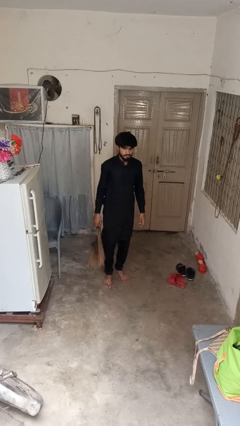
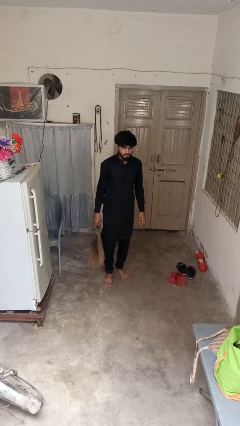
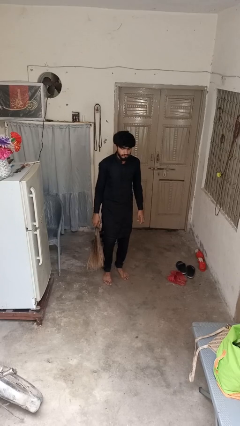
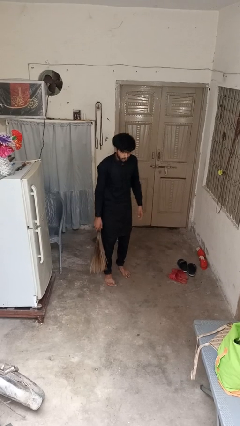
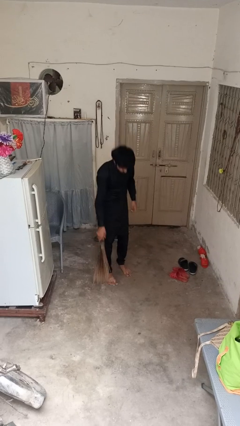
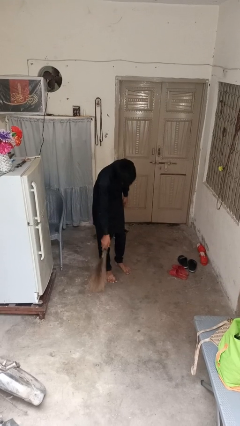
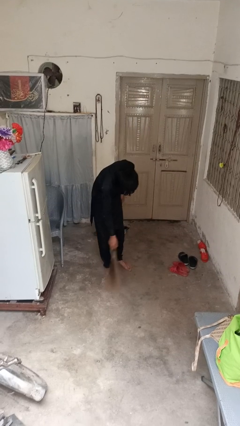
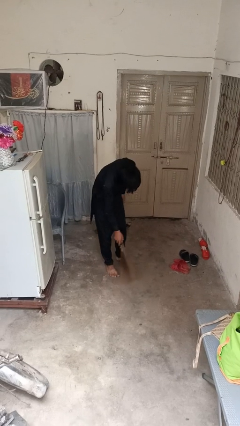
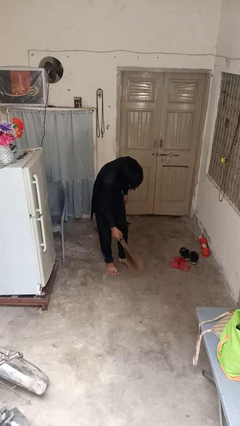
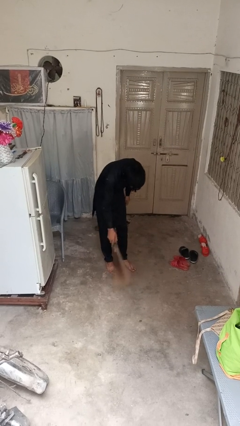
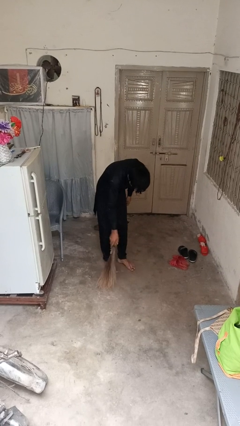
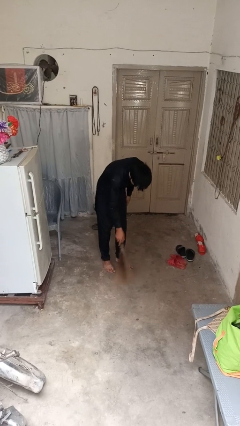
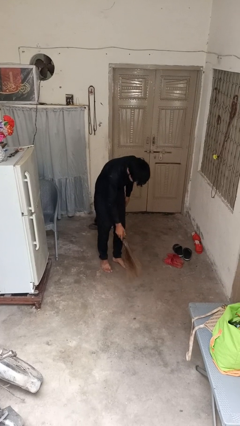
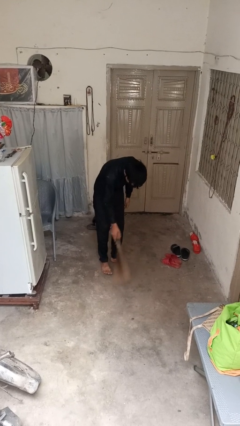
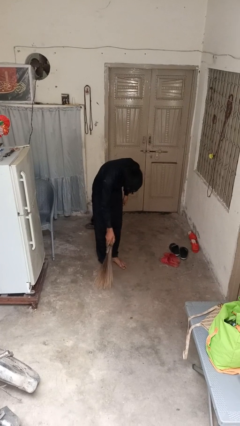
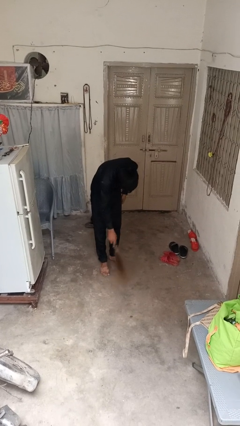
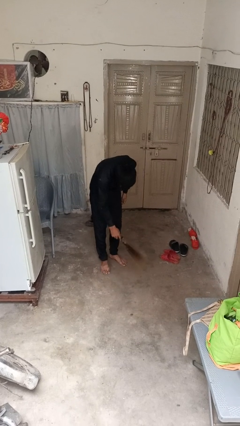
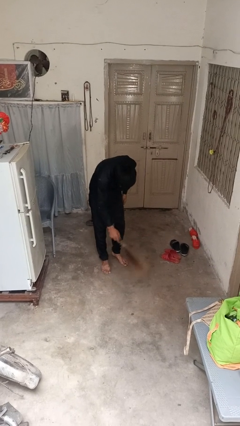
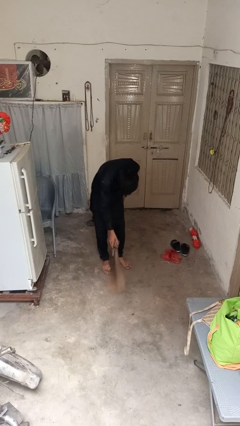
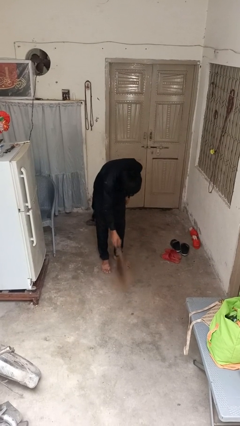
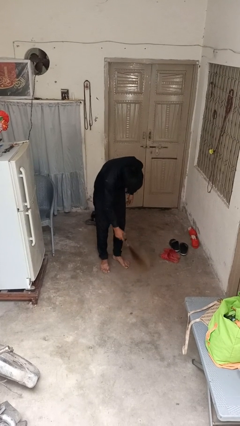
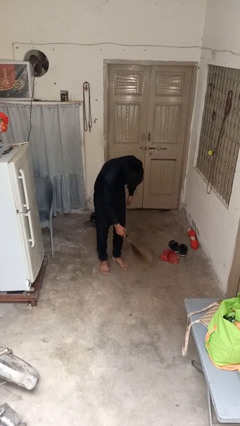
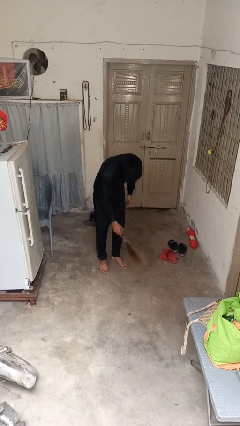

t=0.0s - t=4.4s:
person sweeps floor

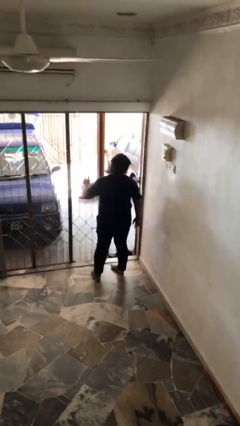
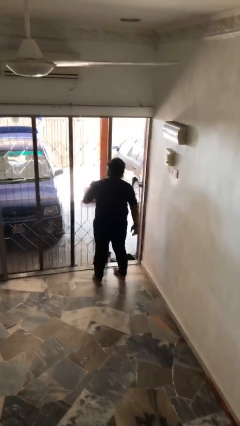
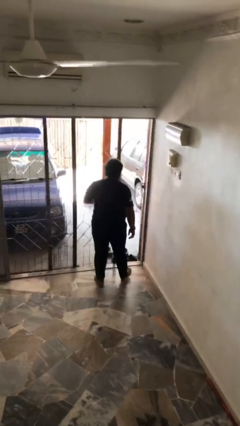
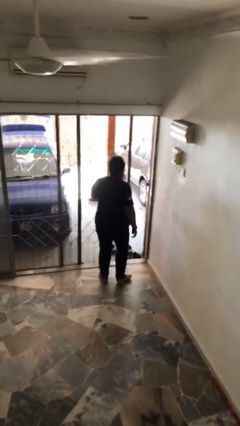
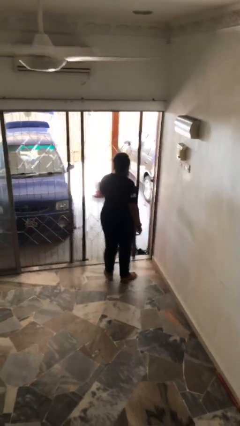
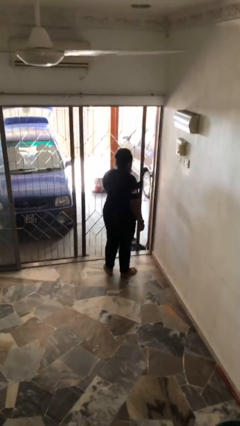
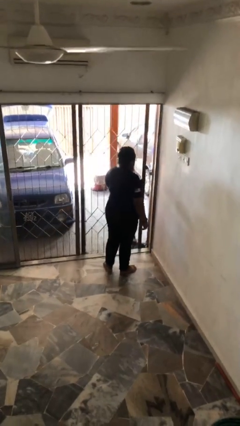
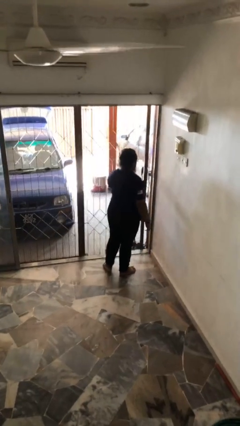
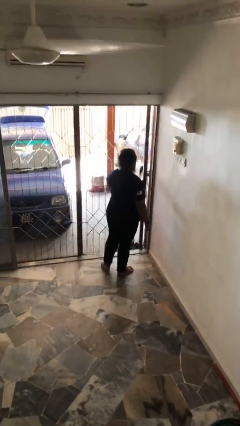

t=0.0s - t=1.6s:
person closes facility door

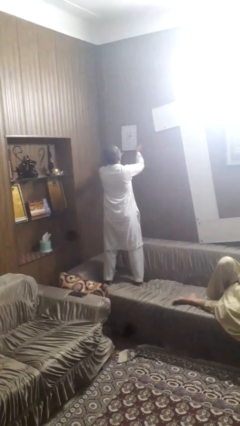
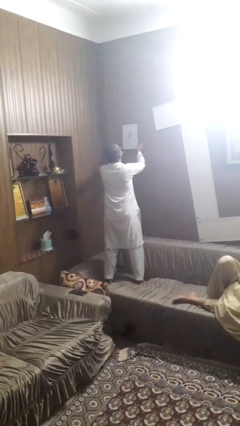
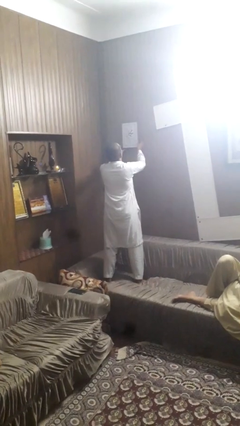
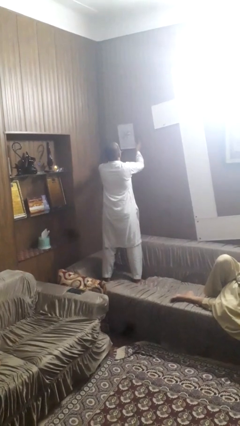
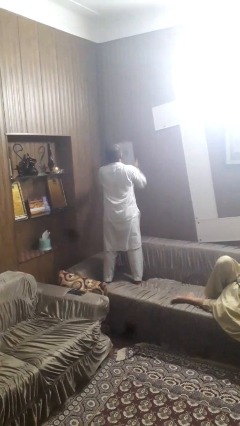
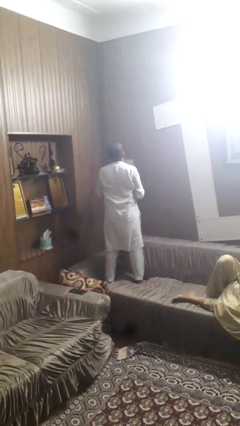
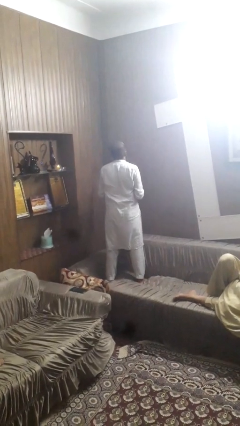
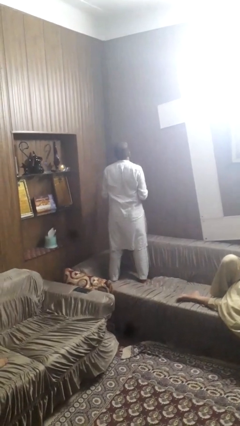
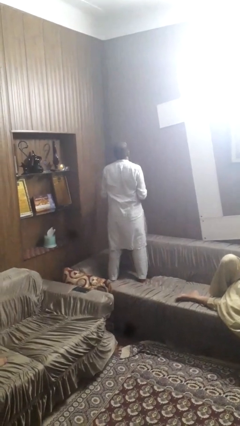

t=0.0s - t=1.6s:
person takes down picture frame

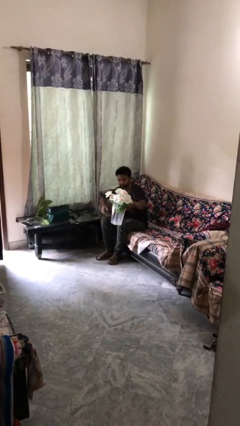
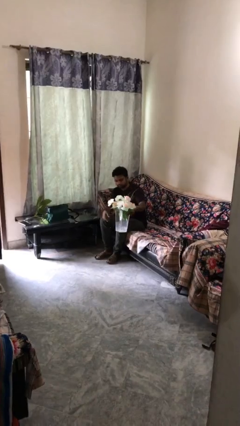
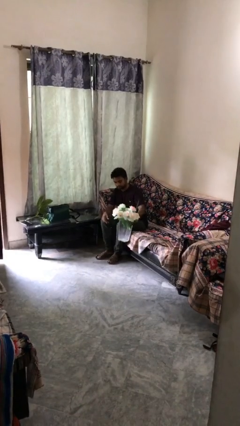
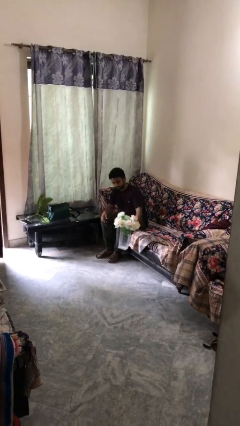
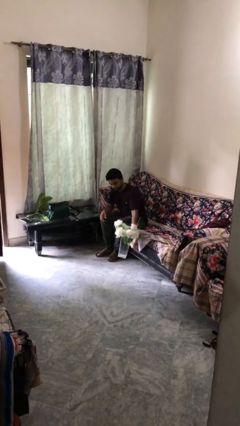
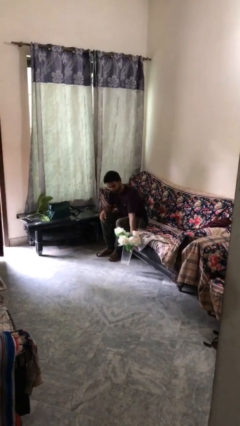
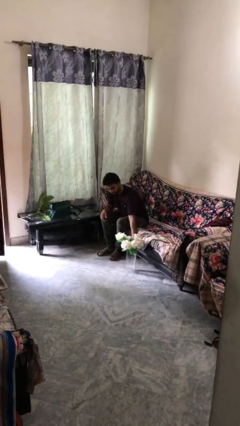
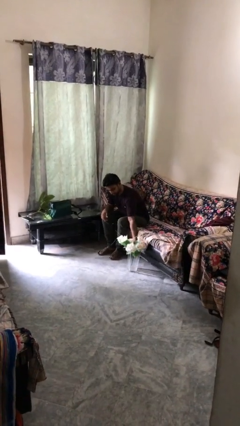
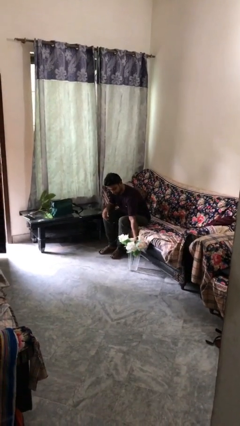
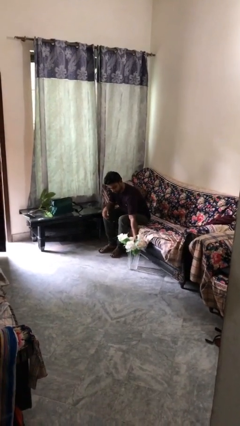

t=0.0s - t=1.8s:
person puts down object on floor

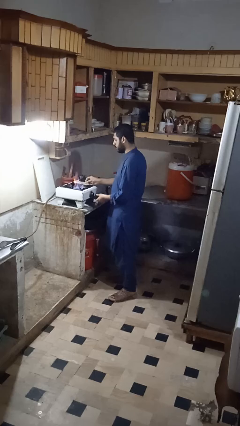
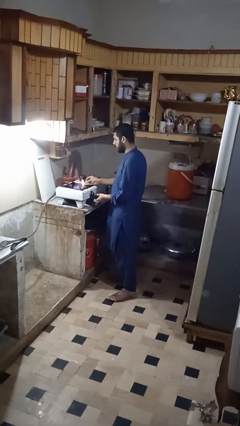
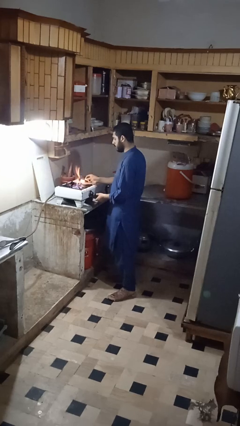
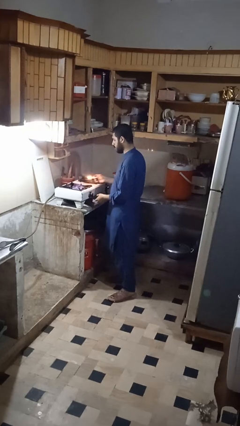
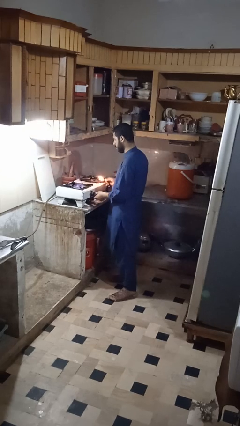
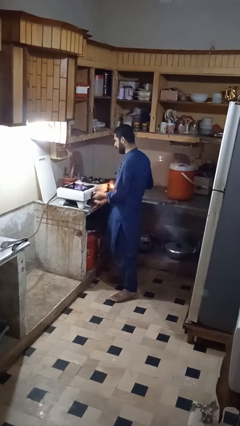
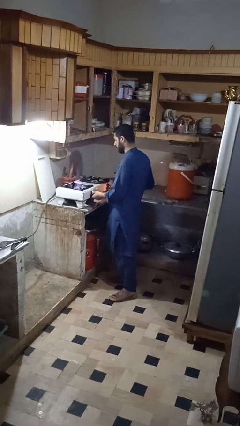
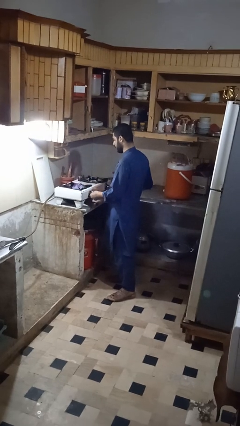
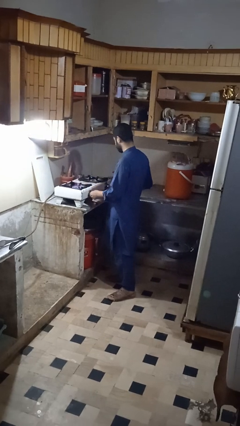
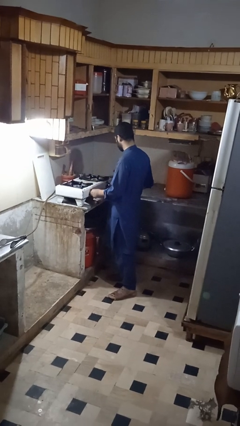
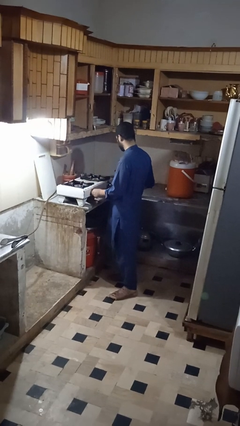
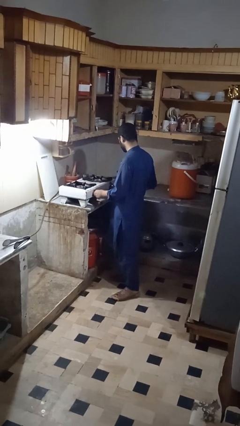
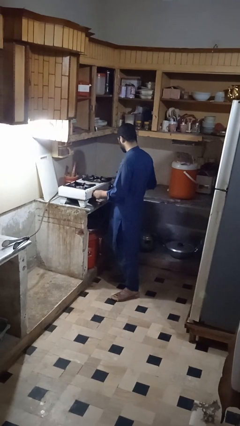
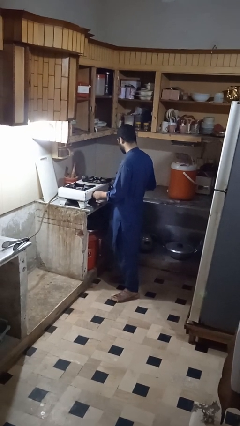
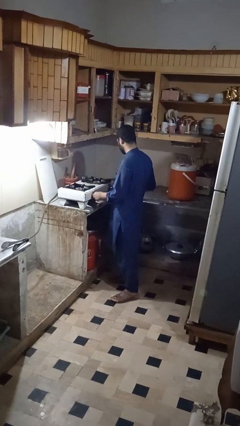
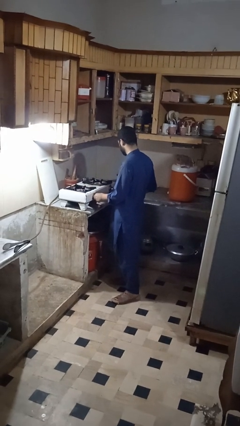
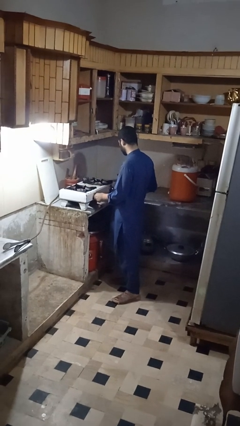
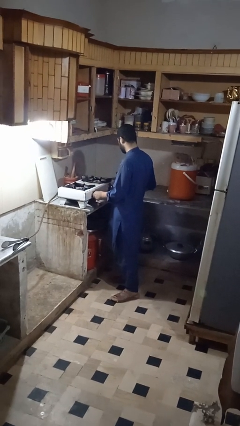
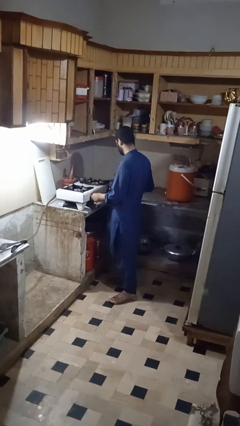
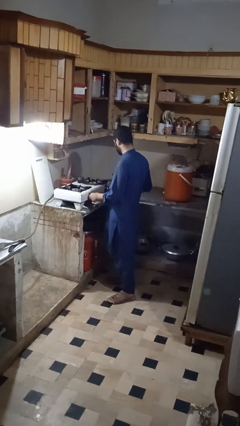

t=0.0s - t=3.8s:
person turns off stovetop

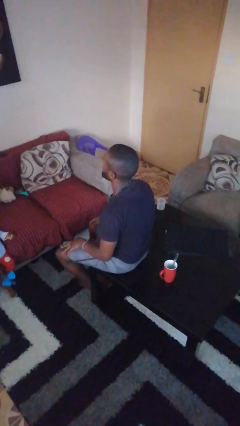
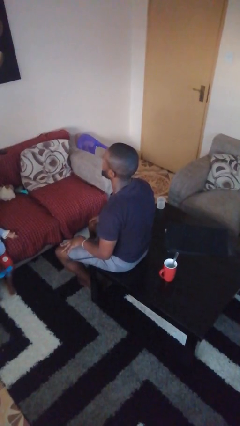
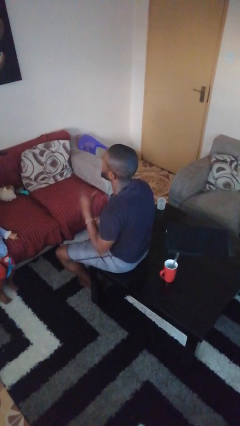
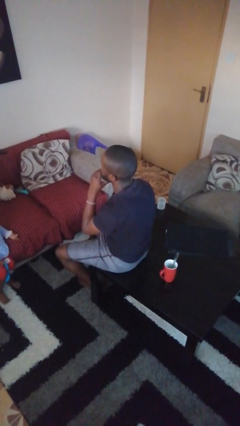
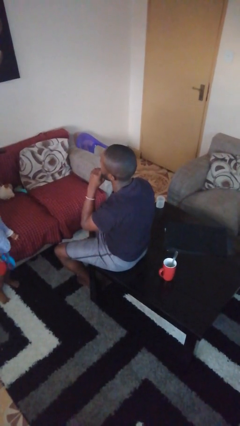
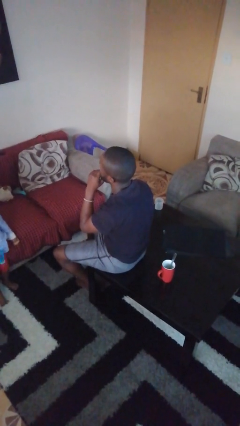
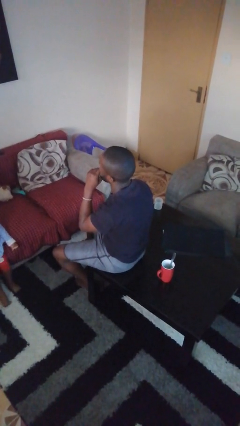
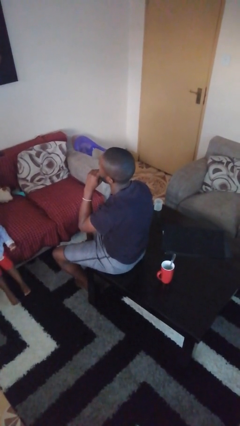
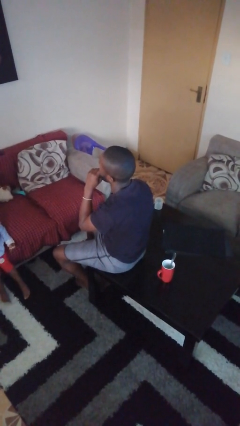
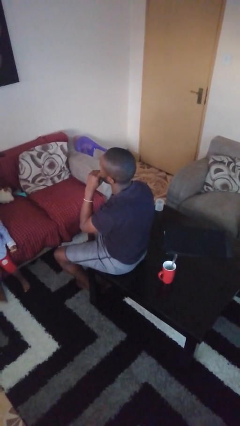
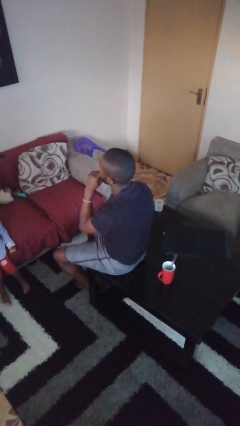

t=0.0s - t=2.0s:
person strokes chin

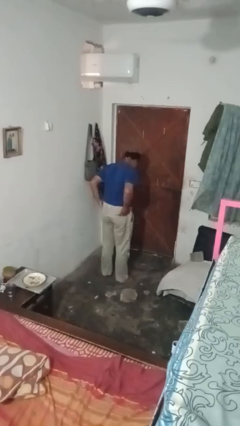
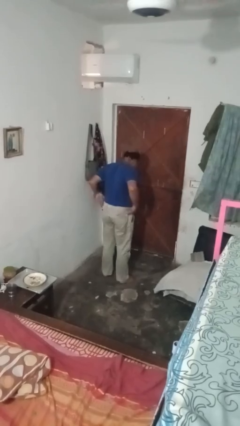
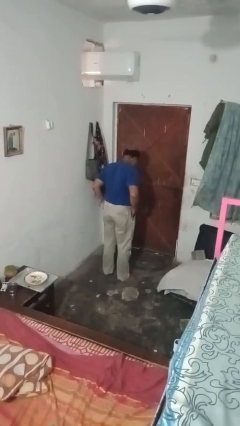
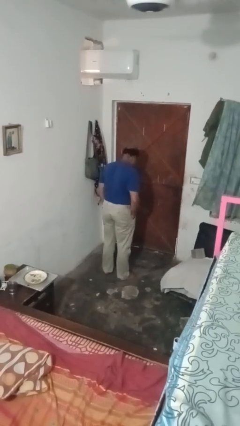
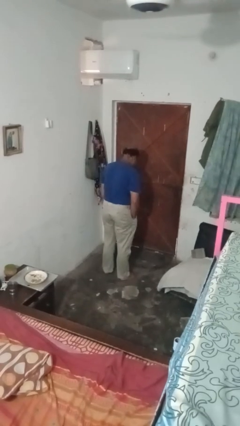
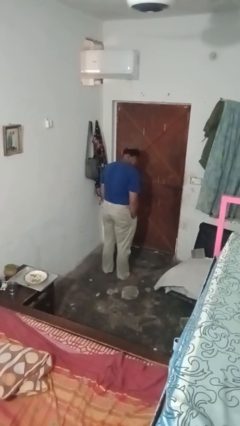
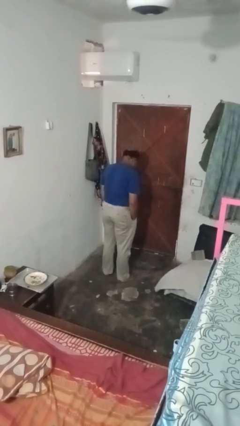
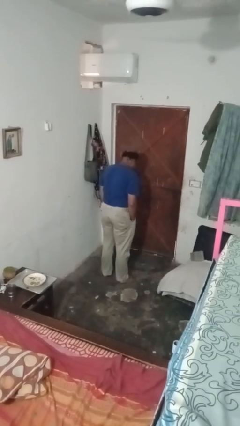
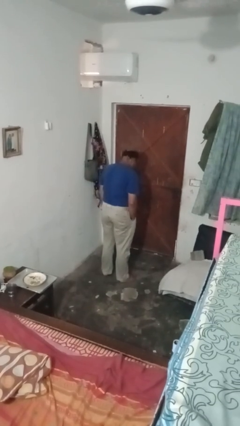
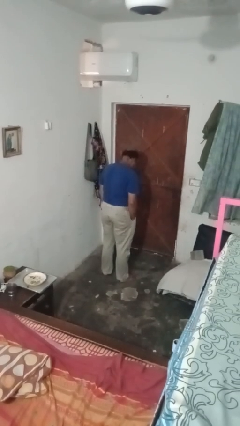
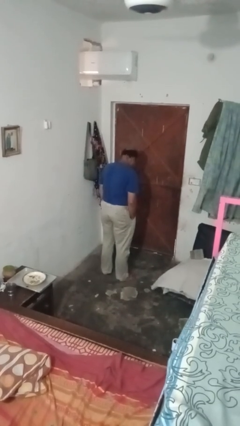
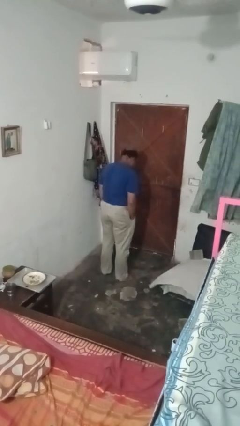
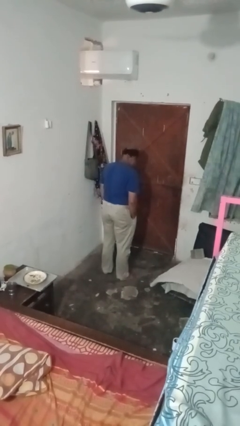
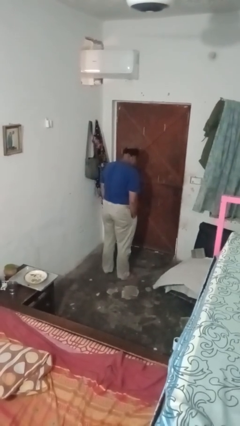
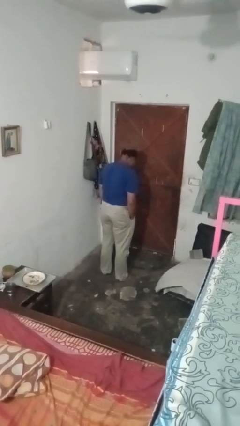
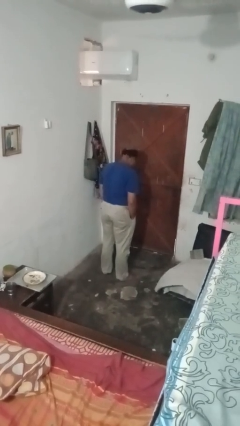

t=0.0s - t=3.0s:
person puts hands in back pockets
